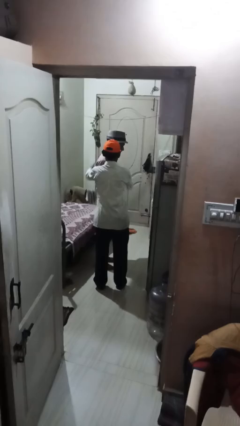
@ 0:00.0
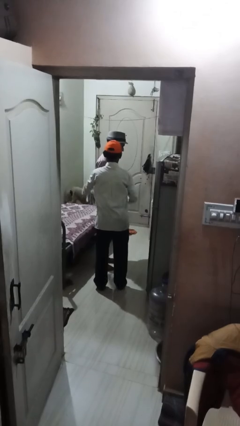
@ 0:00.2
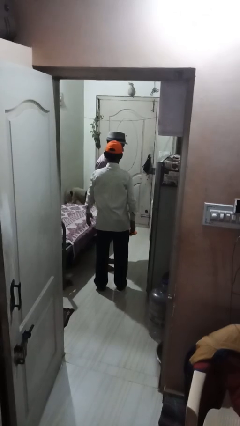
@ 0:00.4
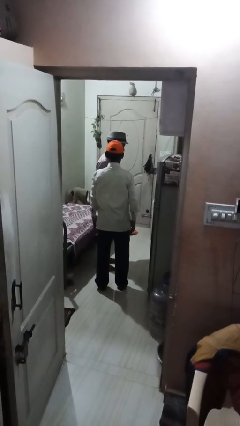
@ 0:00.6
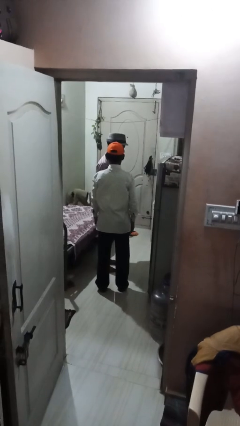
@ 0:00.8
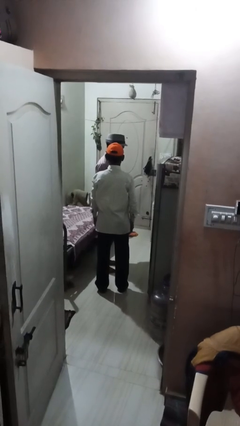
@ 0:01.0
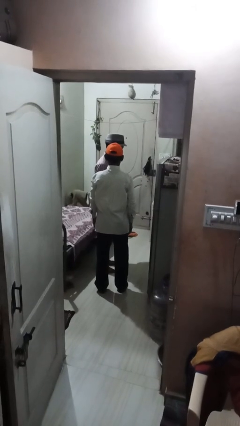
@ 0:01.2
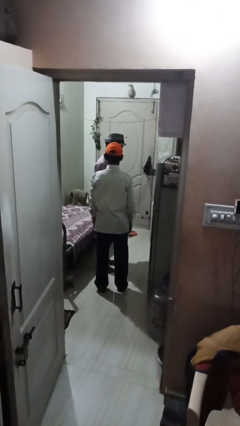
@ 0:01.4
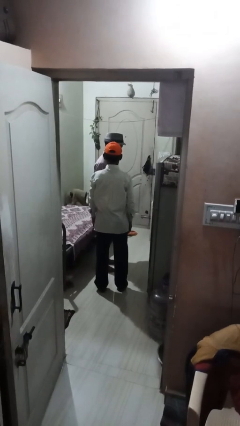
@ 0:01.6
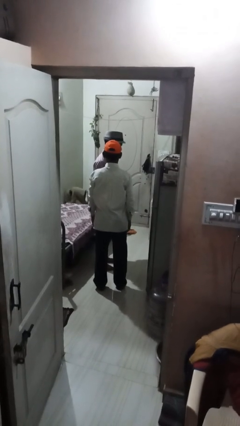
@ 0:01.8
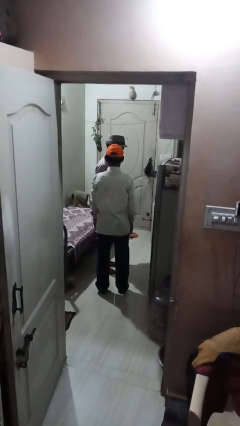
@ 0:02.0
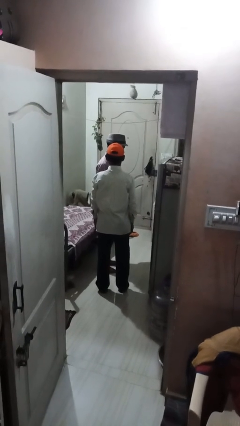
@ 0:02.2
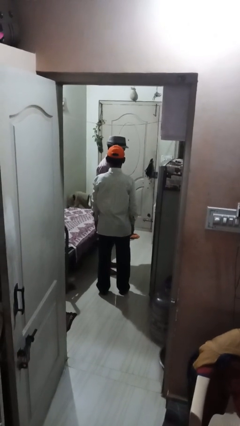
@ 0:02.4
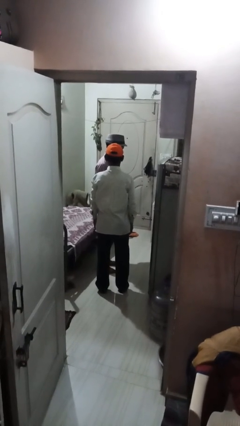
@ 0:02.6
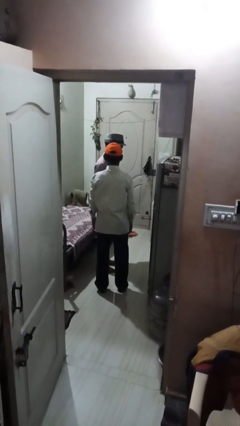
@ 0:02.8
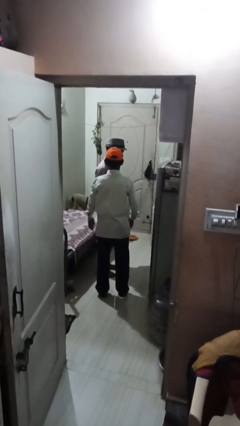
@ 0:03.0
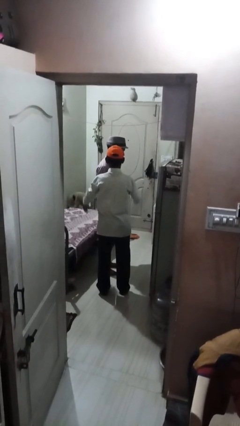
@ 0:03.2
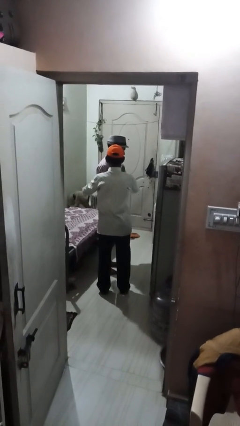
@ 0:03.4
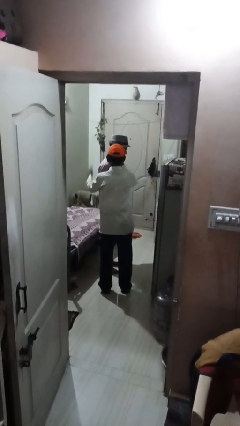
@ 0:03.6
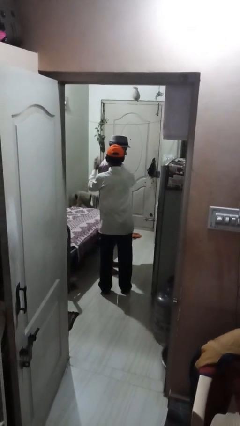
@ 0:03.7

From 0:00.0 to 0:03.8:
person pounds shoulders of person

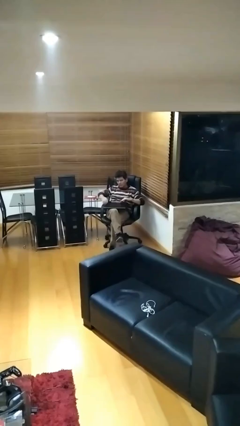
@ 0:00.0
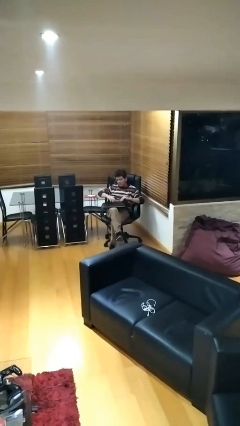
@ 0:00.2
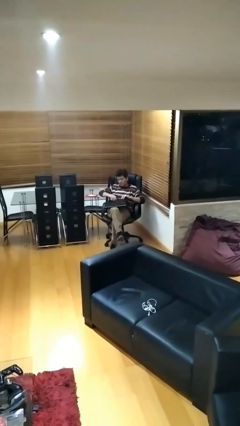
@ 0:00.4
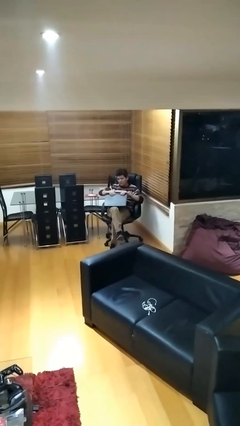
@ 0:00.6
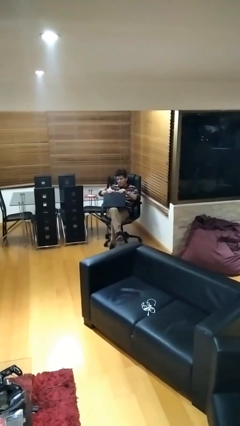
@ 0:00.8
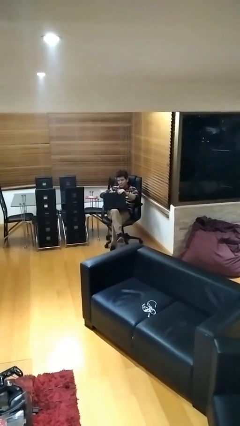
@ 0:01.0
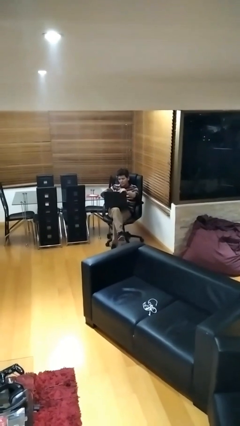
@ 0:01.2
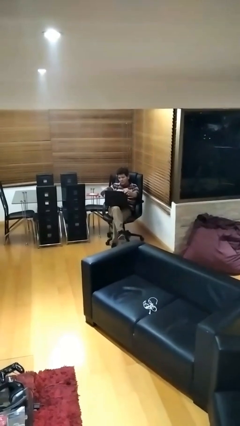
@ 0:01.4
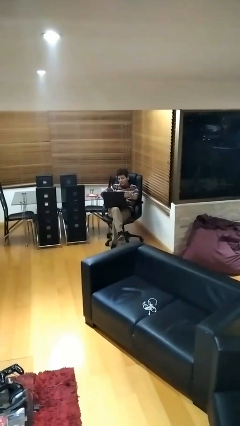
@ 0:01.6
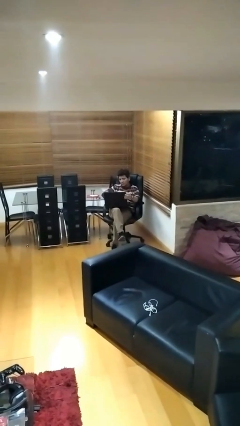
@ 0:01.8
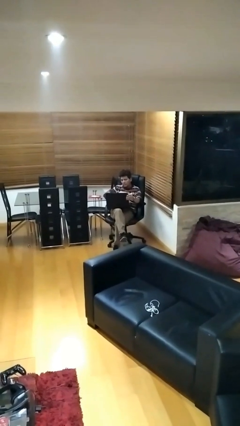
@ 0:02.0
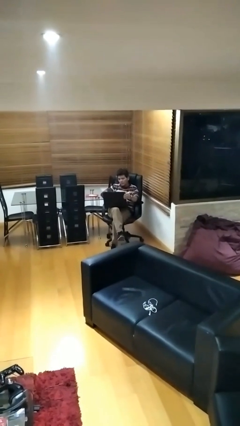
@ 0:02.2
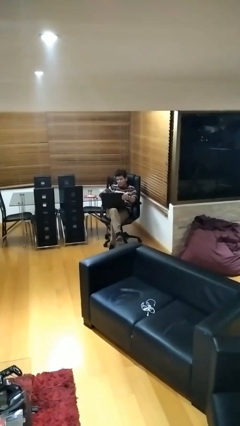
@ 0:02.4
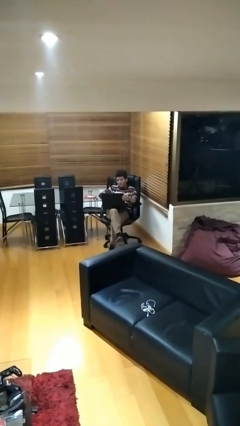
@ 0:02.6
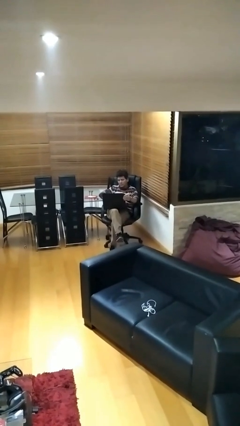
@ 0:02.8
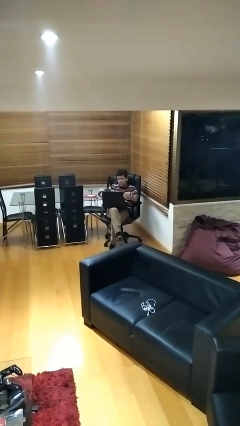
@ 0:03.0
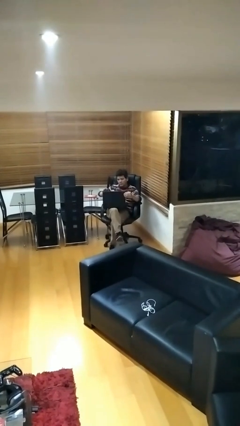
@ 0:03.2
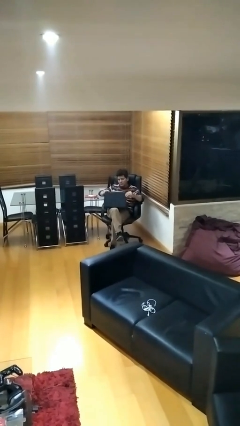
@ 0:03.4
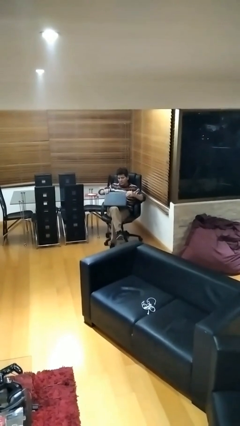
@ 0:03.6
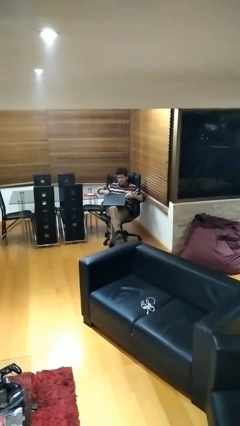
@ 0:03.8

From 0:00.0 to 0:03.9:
person interacts with laptop

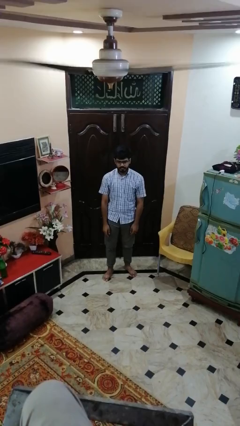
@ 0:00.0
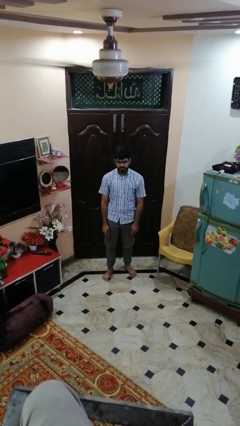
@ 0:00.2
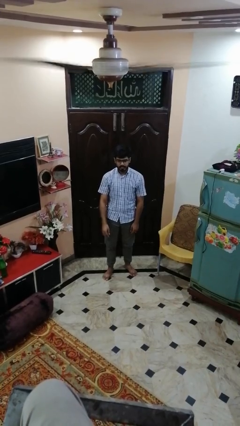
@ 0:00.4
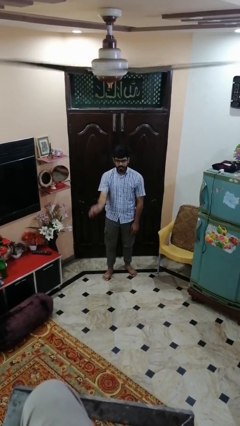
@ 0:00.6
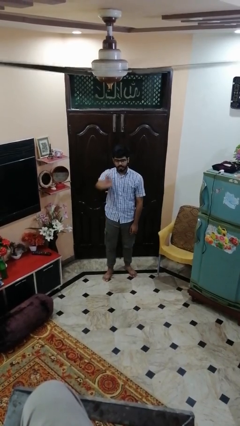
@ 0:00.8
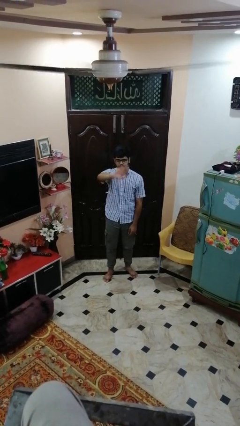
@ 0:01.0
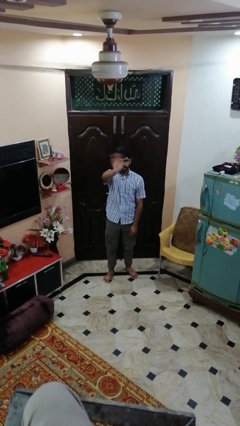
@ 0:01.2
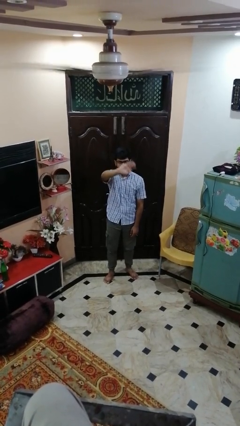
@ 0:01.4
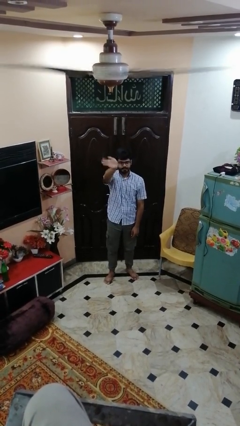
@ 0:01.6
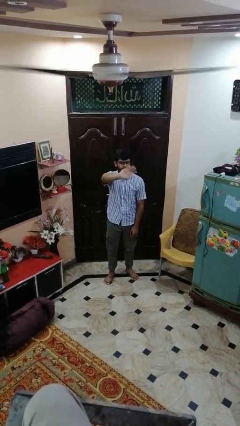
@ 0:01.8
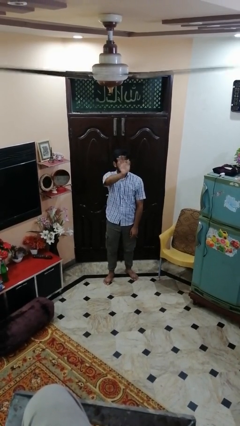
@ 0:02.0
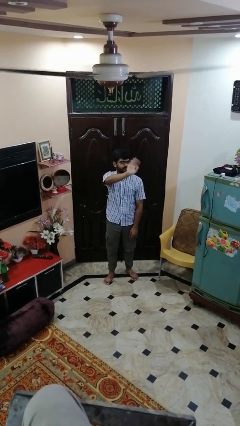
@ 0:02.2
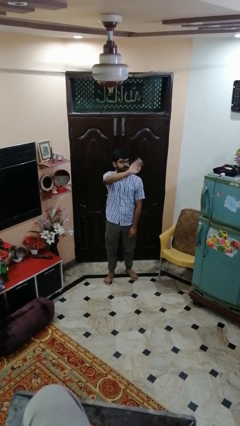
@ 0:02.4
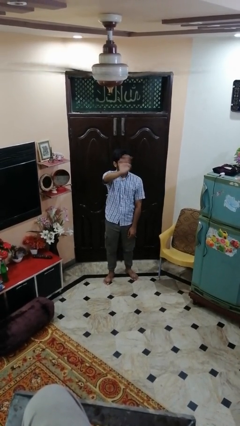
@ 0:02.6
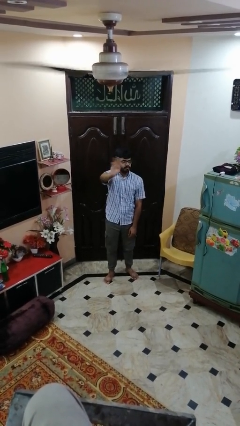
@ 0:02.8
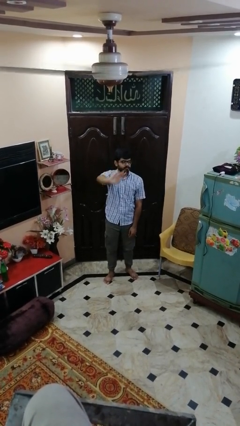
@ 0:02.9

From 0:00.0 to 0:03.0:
person waves at person

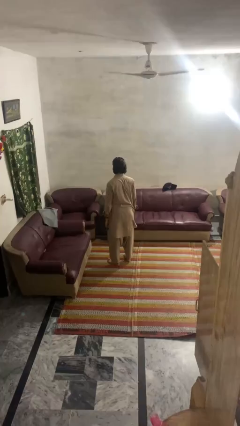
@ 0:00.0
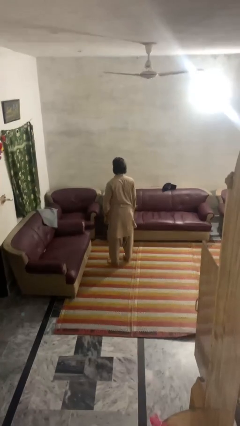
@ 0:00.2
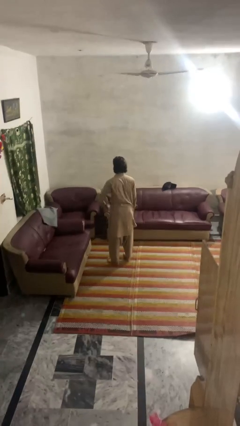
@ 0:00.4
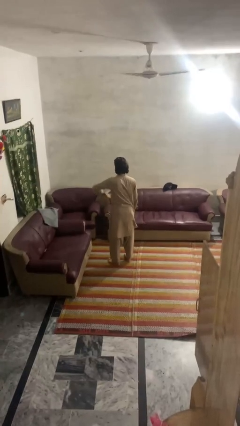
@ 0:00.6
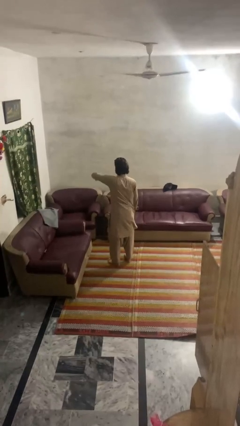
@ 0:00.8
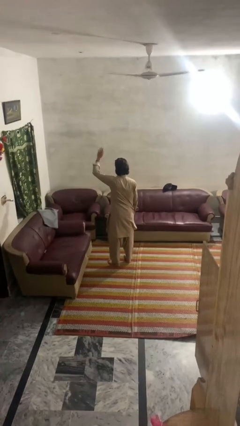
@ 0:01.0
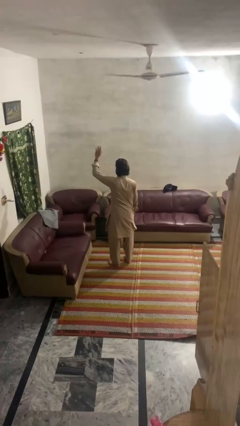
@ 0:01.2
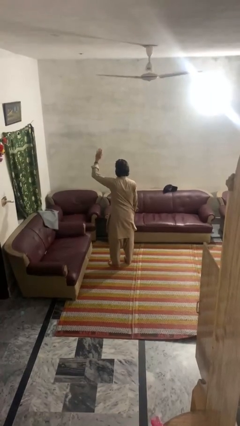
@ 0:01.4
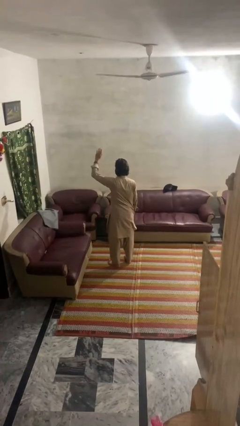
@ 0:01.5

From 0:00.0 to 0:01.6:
person gestures swipe up

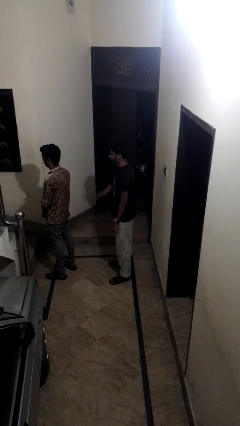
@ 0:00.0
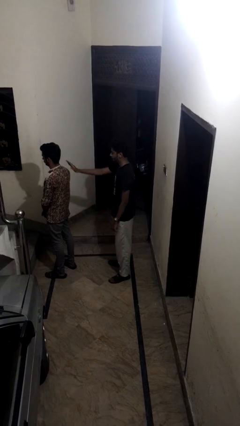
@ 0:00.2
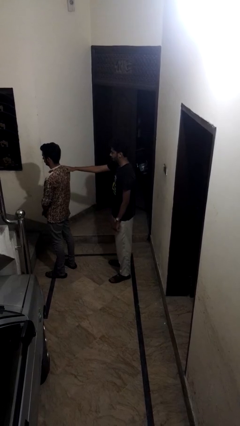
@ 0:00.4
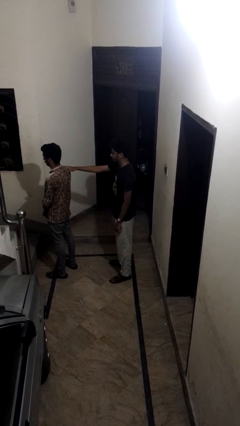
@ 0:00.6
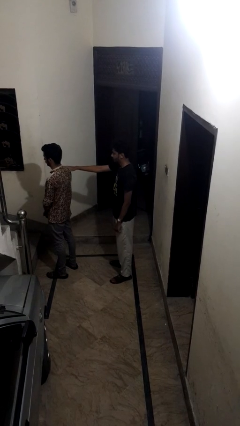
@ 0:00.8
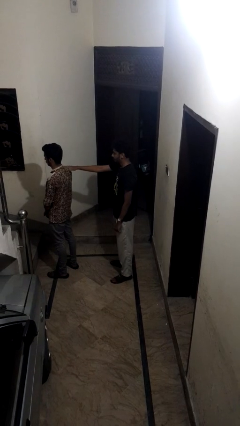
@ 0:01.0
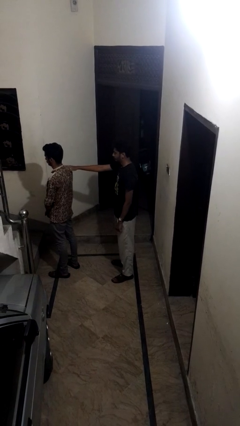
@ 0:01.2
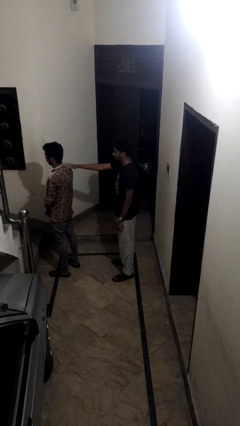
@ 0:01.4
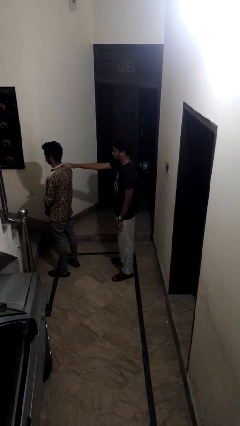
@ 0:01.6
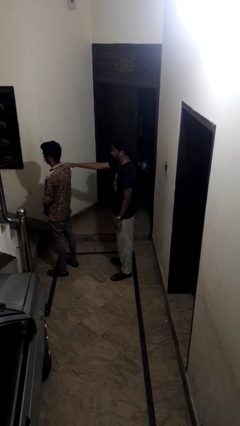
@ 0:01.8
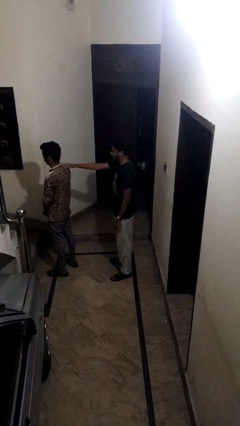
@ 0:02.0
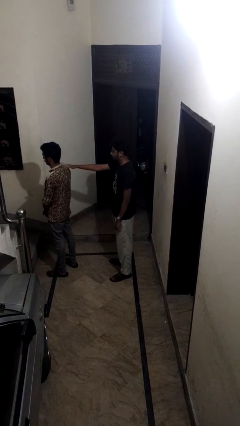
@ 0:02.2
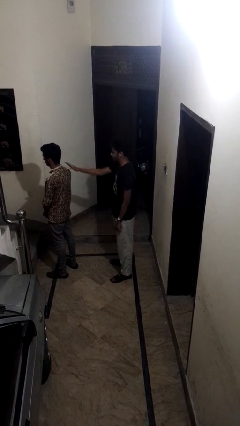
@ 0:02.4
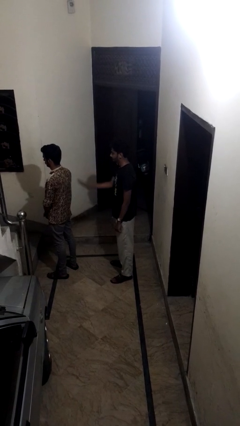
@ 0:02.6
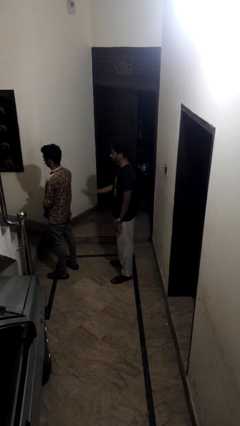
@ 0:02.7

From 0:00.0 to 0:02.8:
person touches back of person

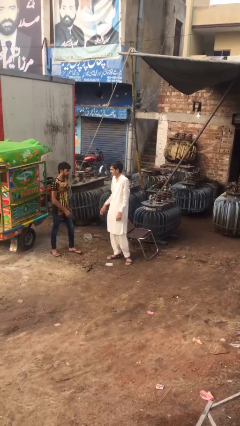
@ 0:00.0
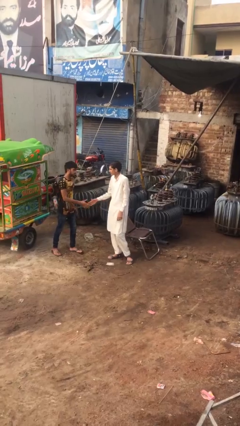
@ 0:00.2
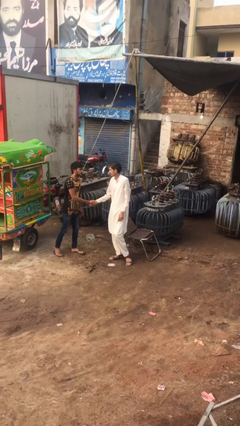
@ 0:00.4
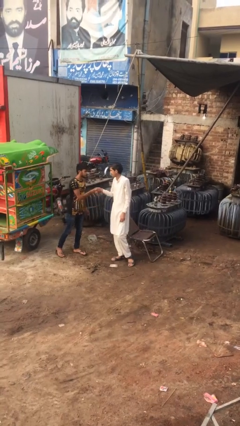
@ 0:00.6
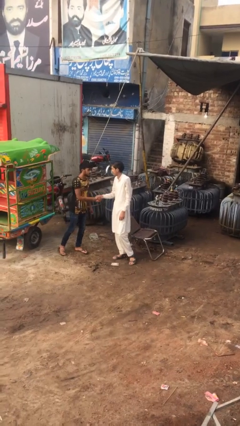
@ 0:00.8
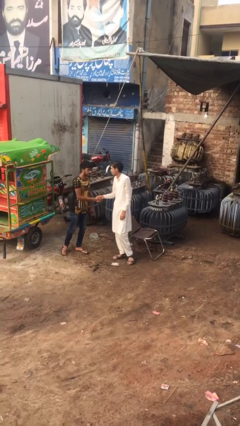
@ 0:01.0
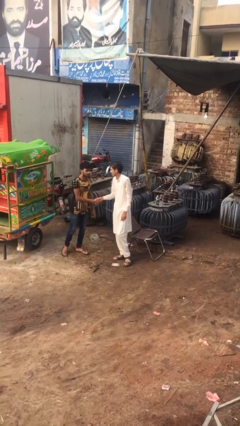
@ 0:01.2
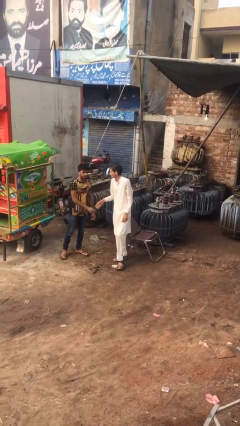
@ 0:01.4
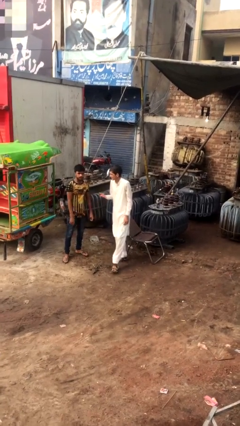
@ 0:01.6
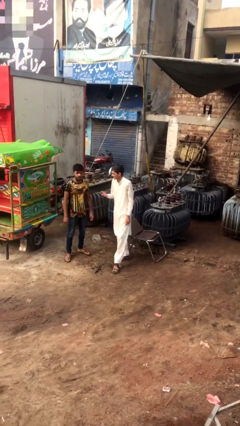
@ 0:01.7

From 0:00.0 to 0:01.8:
person shakes hand

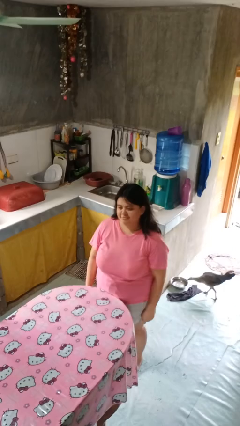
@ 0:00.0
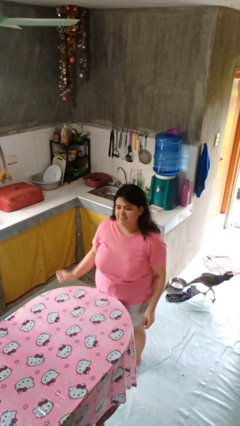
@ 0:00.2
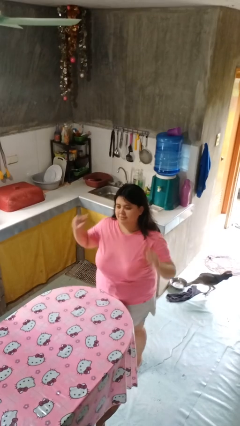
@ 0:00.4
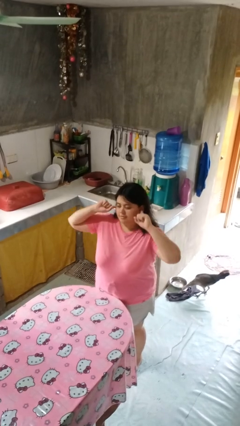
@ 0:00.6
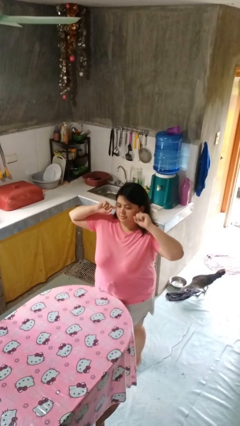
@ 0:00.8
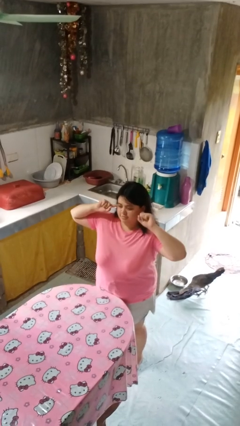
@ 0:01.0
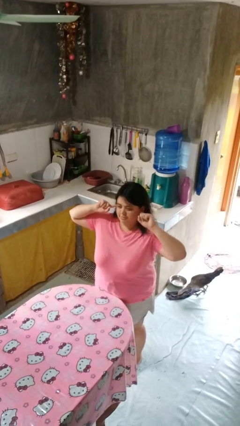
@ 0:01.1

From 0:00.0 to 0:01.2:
person puts fingers in ear
